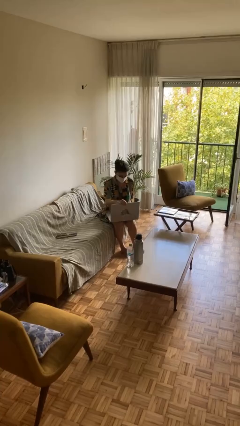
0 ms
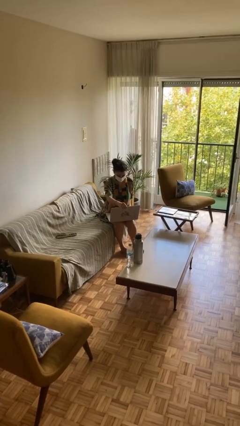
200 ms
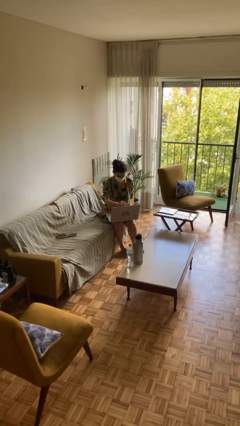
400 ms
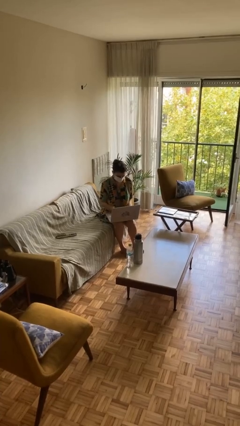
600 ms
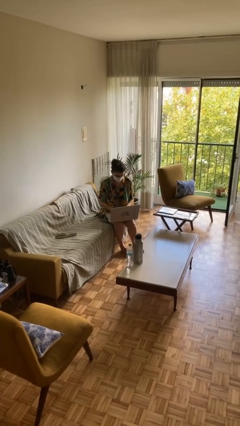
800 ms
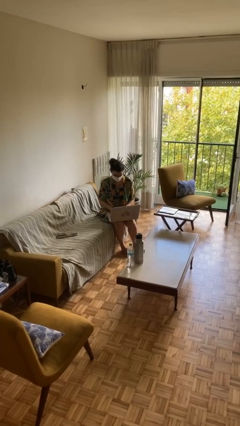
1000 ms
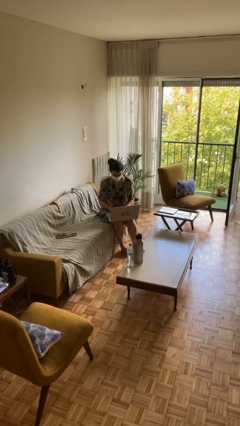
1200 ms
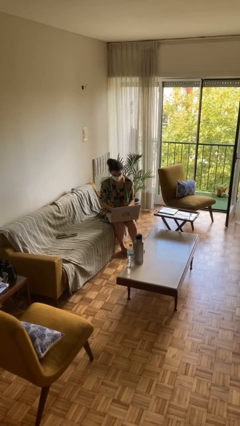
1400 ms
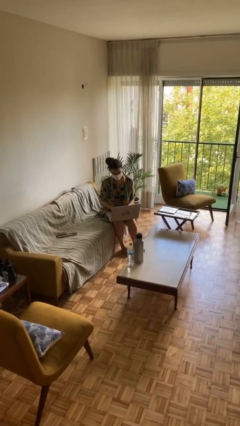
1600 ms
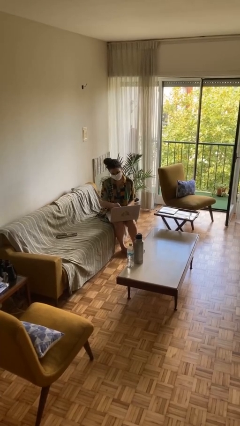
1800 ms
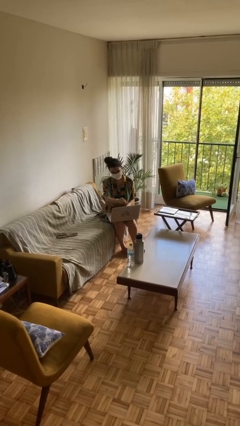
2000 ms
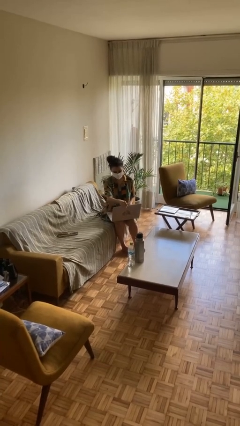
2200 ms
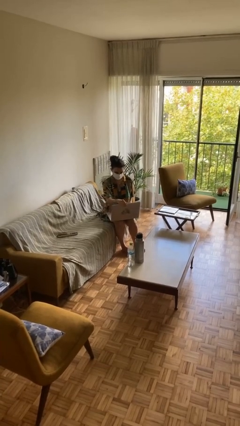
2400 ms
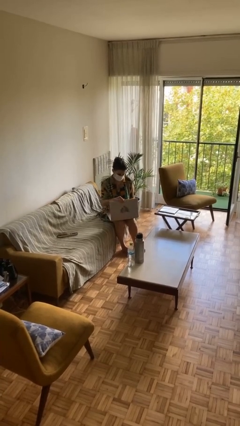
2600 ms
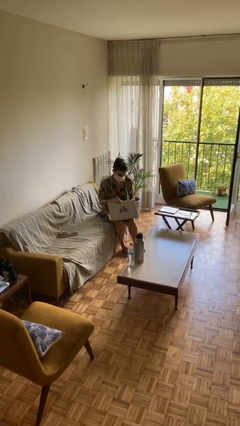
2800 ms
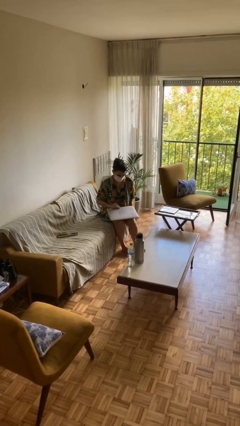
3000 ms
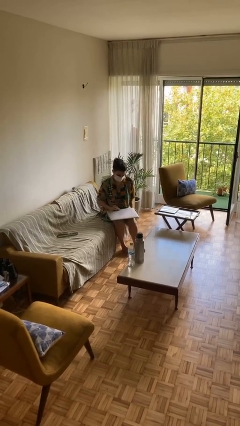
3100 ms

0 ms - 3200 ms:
person interacts with laptop

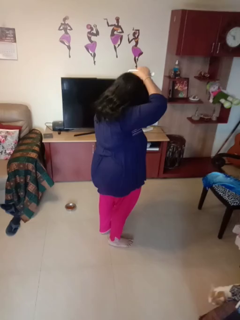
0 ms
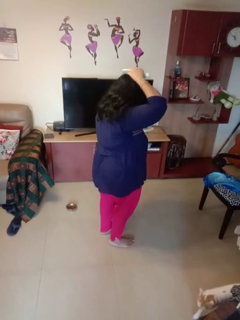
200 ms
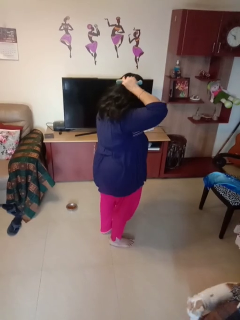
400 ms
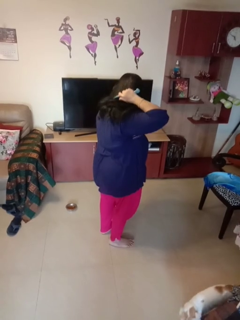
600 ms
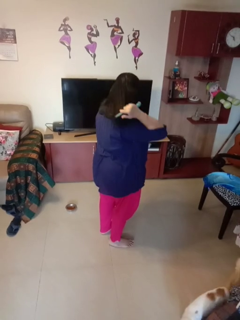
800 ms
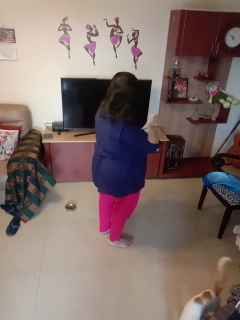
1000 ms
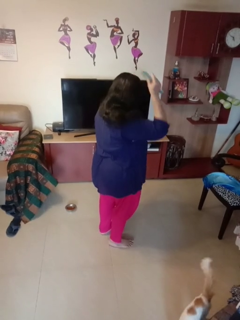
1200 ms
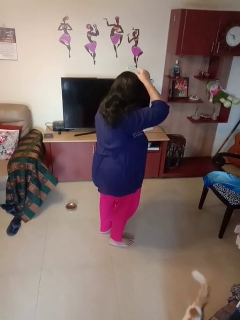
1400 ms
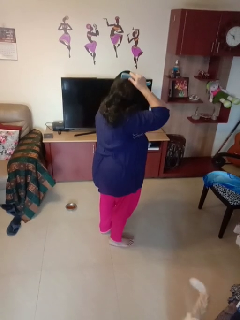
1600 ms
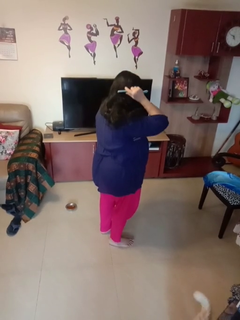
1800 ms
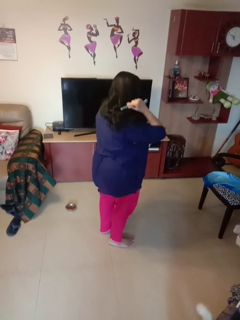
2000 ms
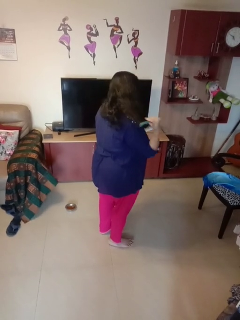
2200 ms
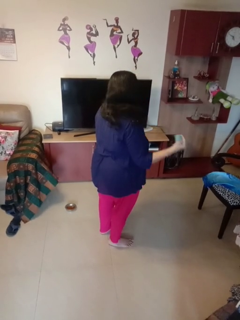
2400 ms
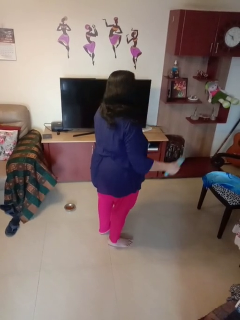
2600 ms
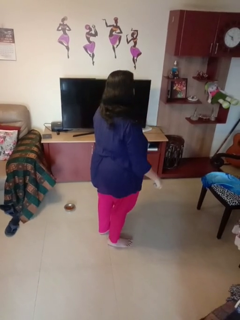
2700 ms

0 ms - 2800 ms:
person brushes hair

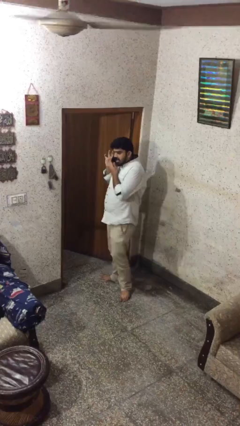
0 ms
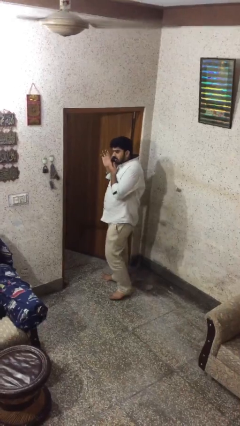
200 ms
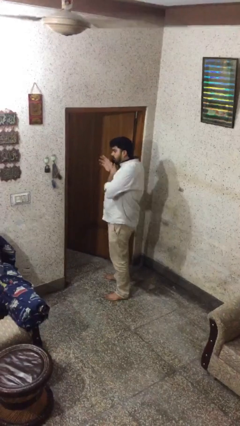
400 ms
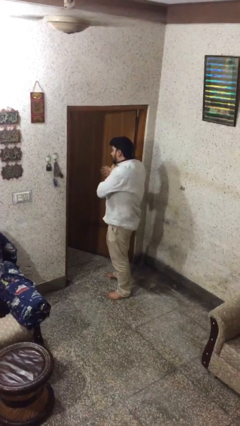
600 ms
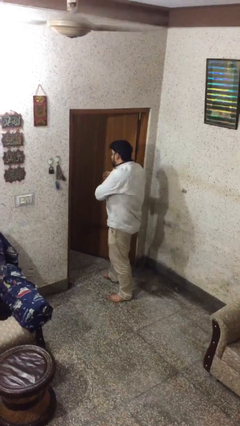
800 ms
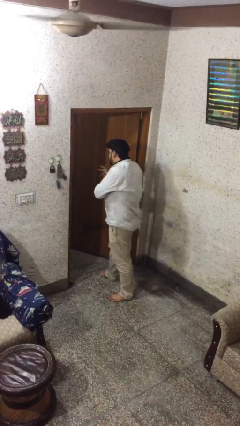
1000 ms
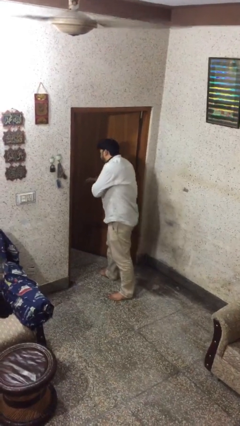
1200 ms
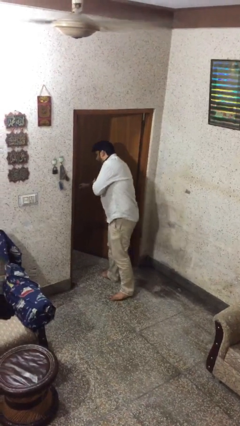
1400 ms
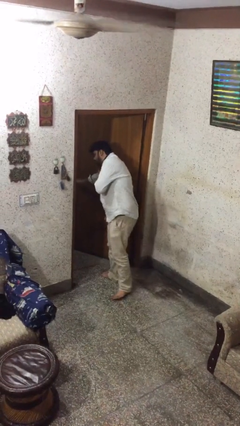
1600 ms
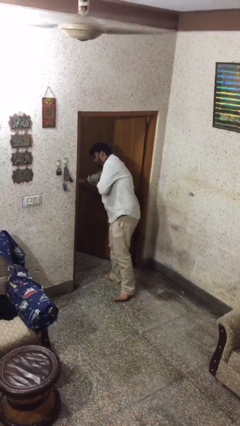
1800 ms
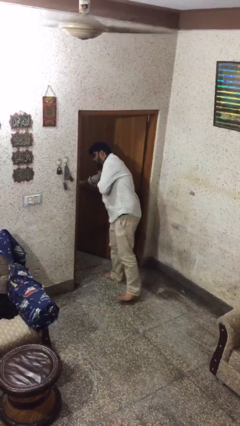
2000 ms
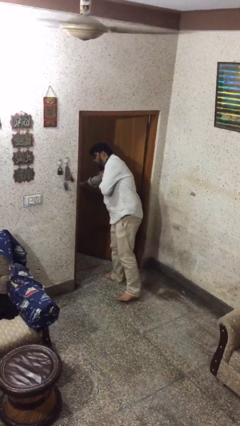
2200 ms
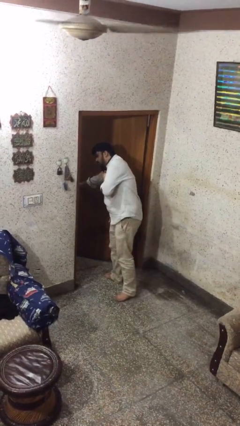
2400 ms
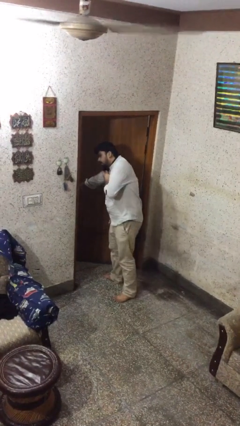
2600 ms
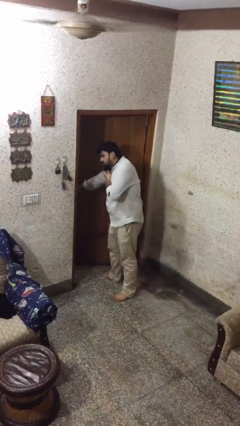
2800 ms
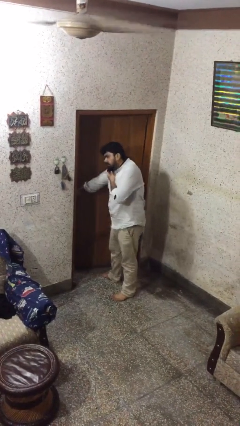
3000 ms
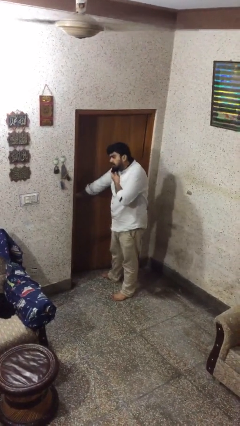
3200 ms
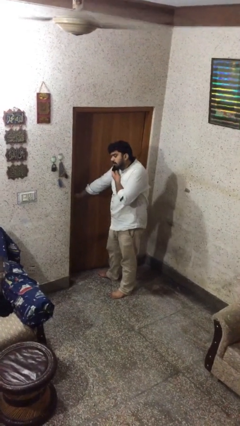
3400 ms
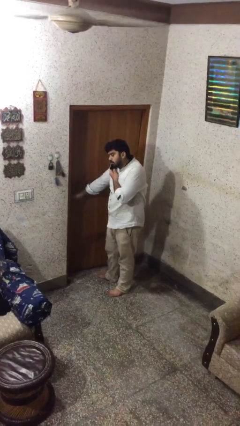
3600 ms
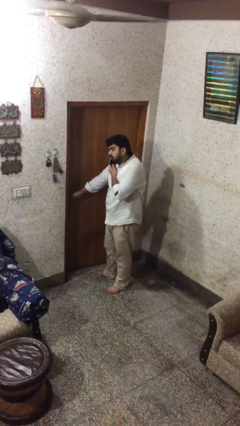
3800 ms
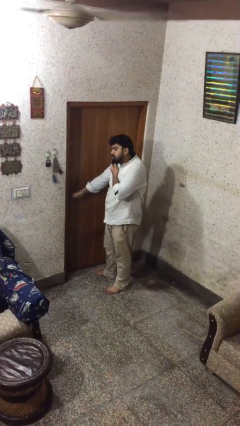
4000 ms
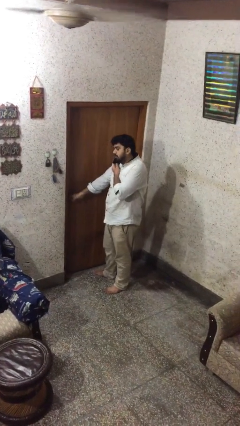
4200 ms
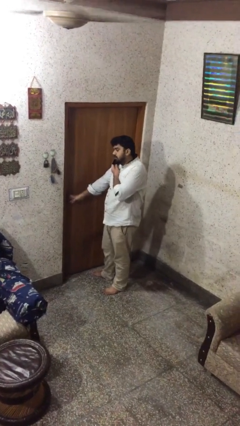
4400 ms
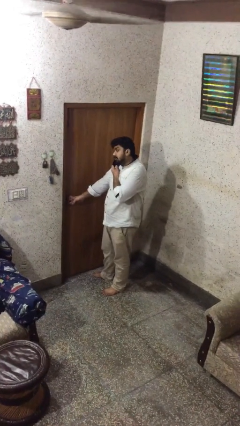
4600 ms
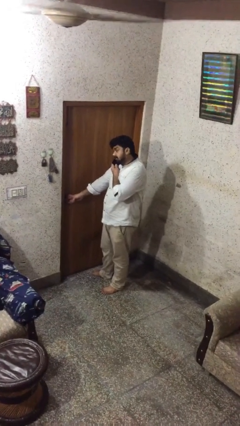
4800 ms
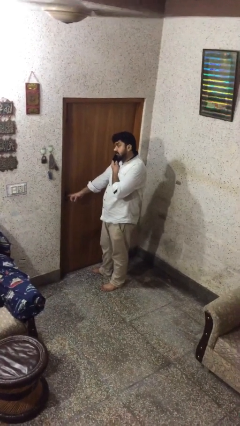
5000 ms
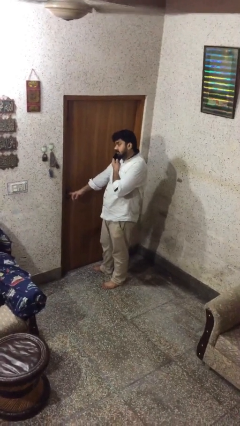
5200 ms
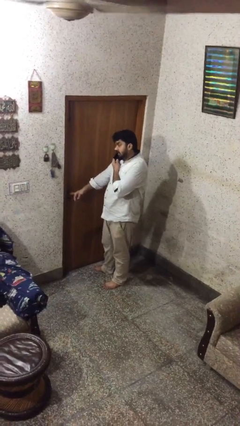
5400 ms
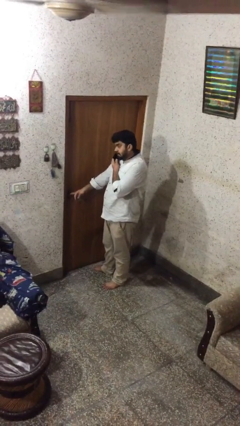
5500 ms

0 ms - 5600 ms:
person closes facility door

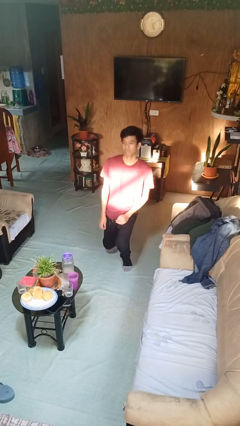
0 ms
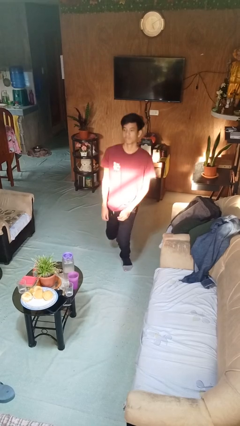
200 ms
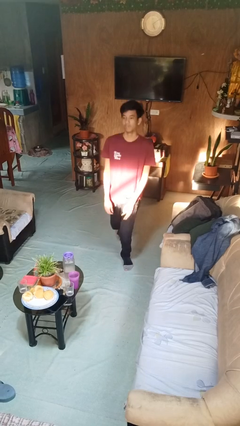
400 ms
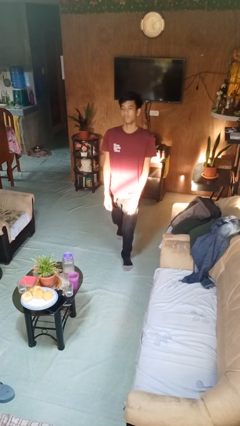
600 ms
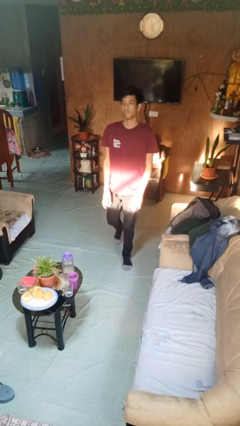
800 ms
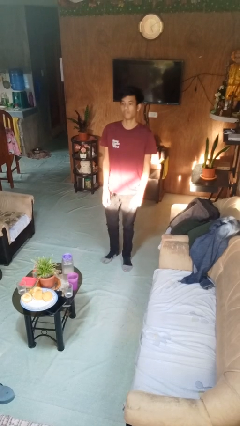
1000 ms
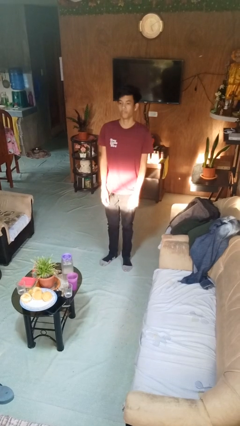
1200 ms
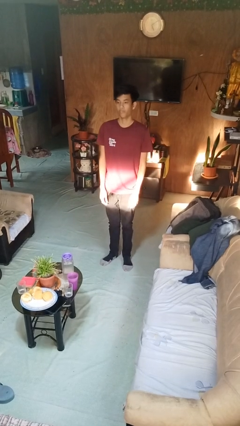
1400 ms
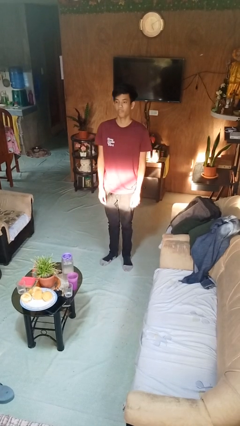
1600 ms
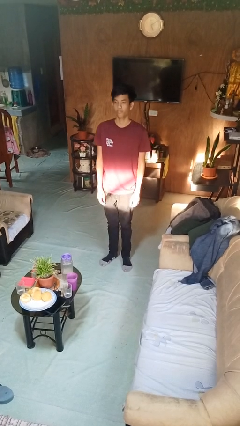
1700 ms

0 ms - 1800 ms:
person stands up from floor

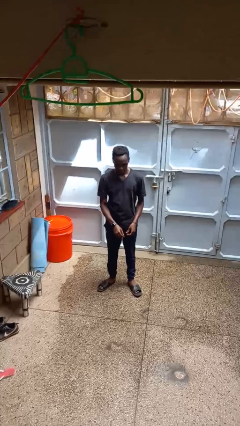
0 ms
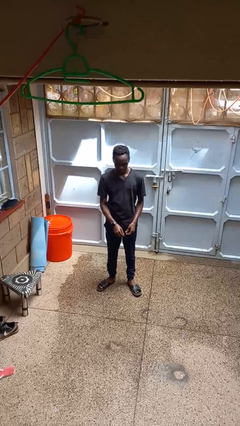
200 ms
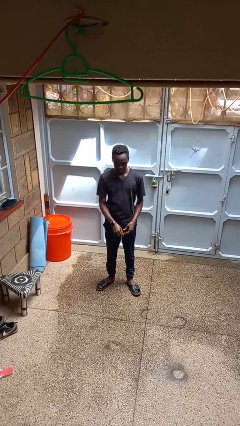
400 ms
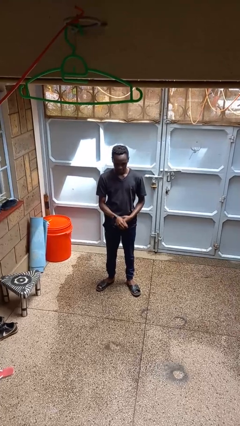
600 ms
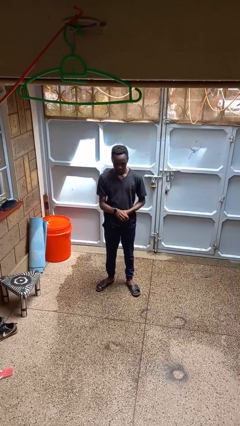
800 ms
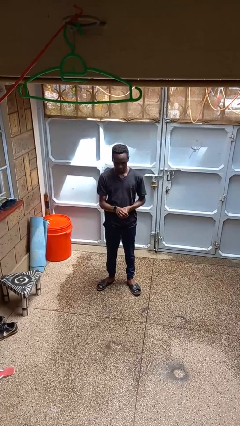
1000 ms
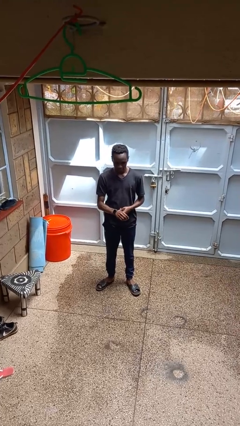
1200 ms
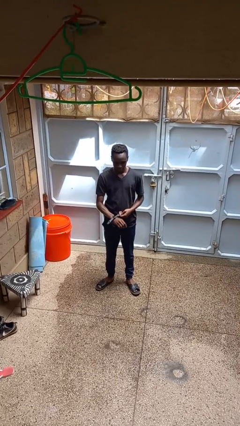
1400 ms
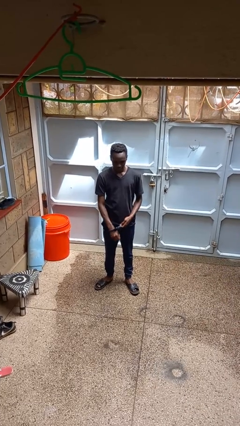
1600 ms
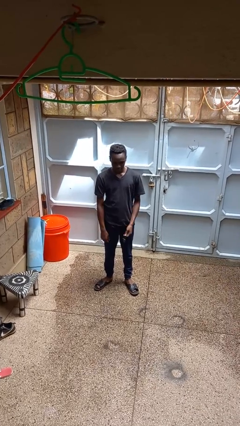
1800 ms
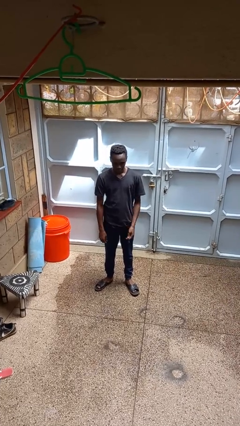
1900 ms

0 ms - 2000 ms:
person takes off wristwatch

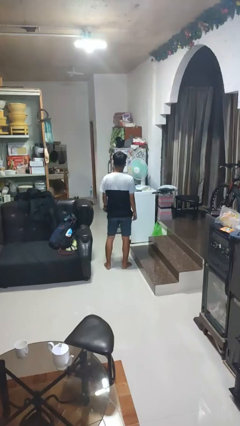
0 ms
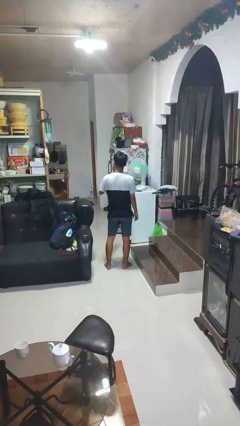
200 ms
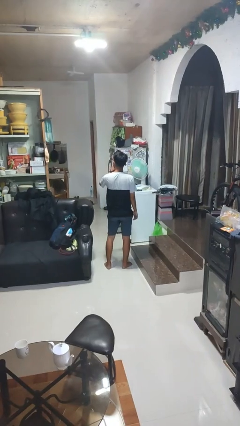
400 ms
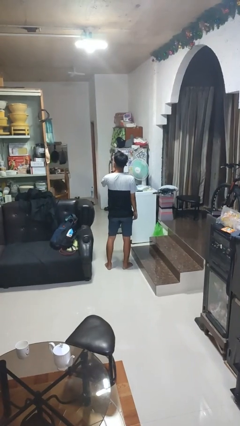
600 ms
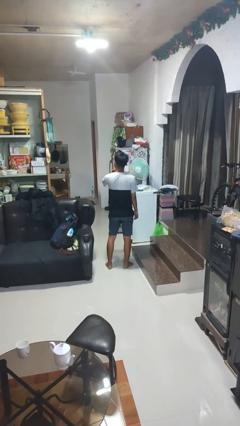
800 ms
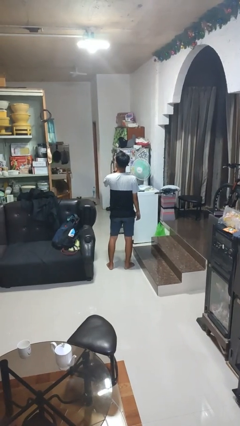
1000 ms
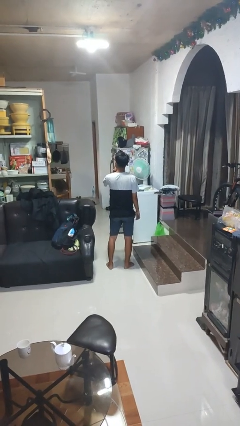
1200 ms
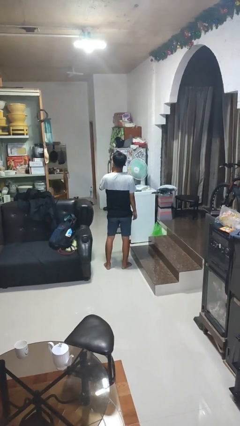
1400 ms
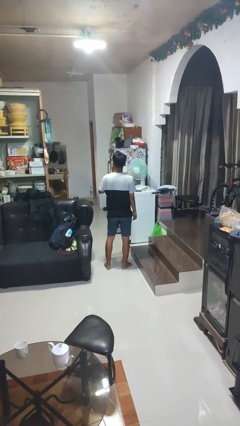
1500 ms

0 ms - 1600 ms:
person gestures be quiet

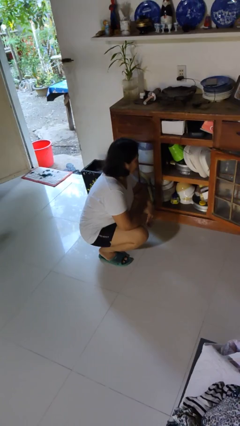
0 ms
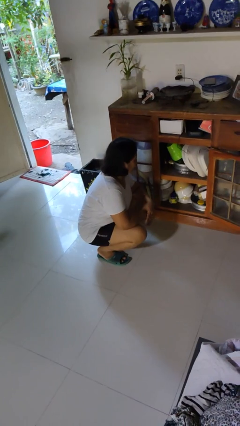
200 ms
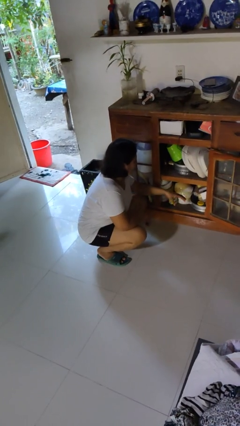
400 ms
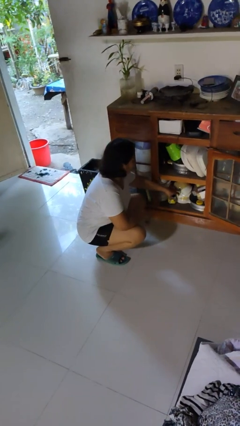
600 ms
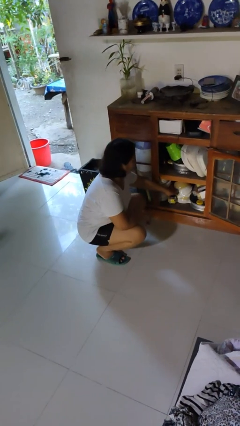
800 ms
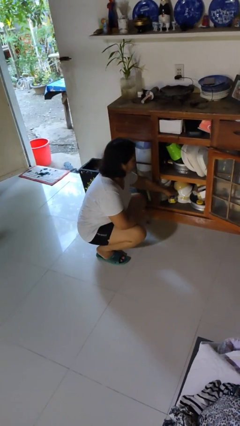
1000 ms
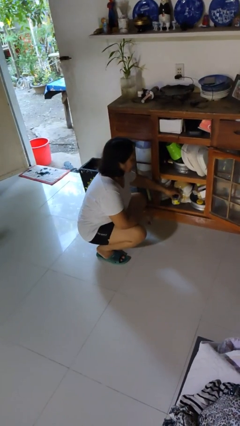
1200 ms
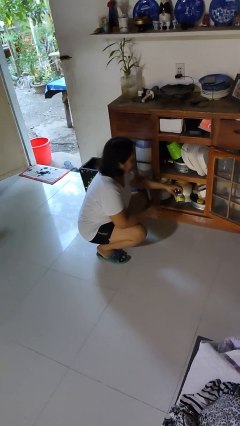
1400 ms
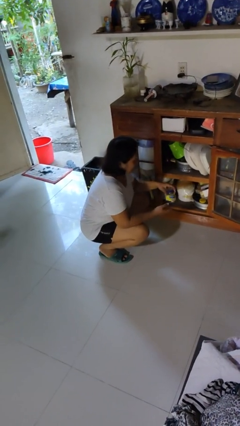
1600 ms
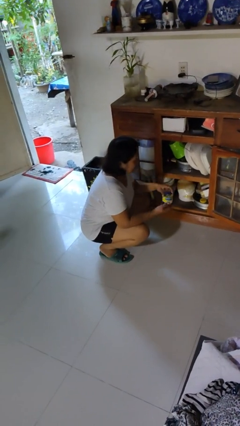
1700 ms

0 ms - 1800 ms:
person picks up object from cabinet
